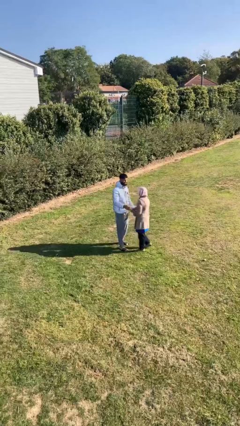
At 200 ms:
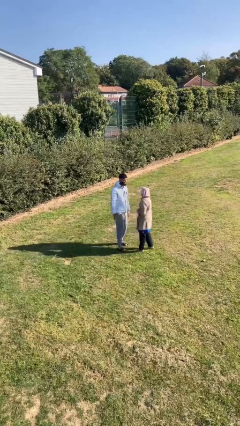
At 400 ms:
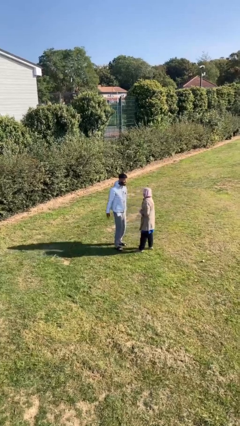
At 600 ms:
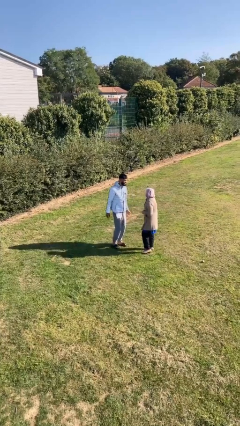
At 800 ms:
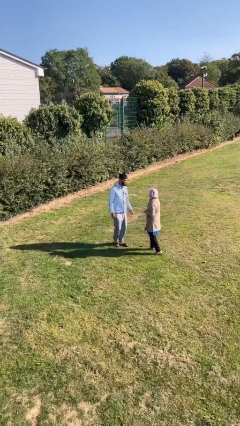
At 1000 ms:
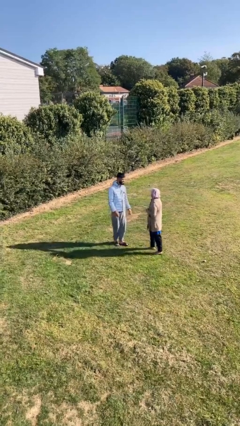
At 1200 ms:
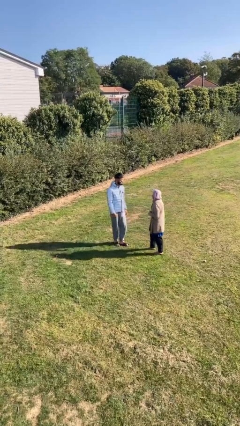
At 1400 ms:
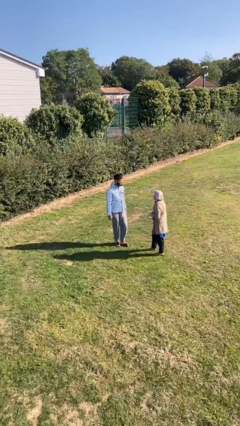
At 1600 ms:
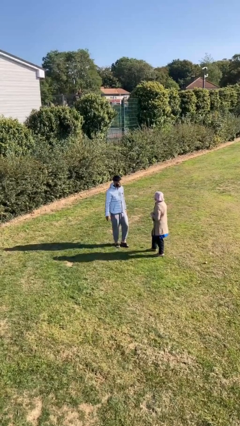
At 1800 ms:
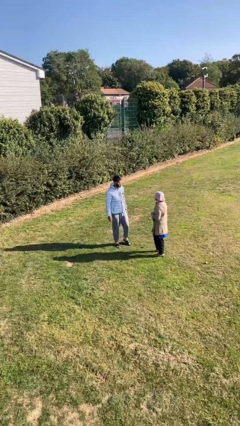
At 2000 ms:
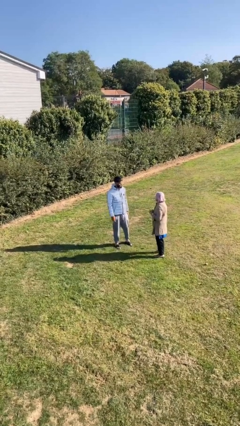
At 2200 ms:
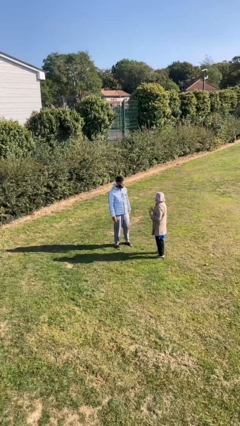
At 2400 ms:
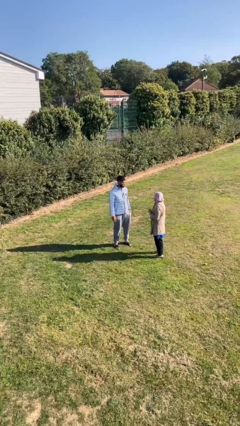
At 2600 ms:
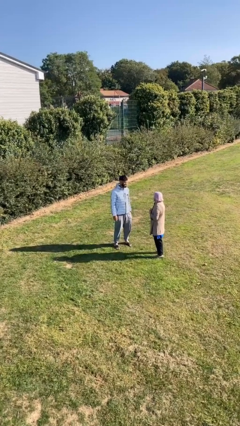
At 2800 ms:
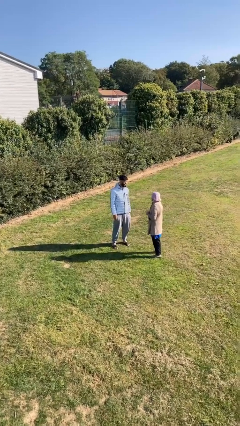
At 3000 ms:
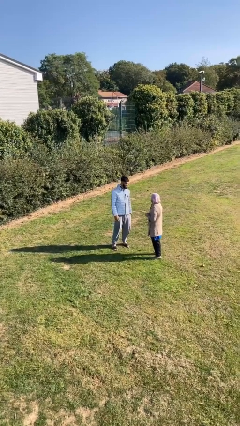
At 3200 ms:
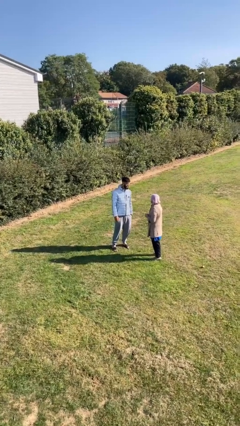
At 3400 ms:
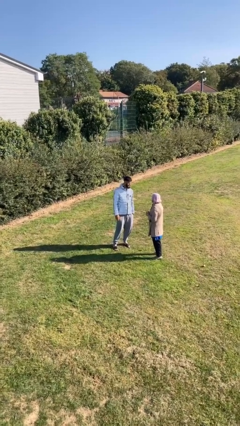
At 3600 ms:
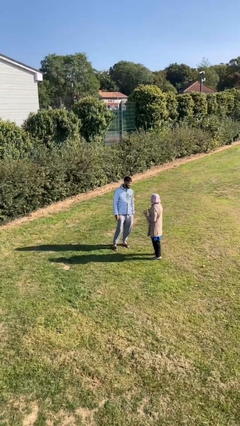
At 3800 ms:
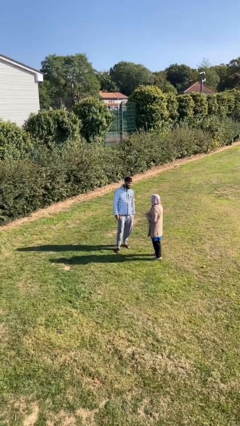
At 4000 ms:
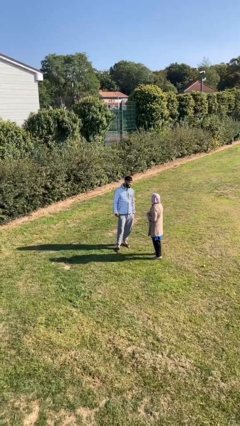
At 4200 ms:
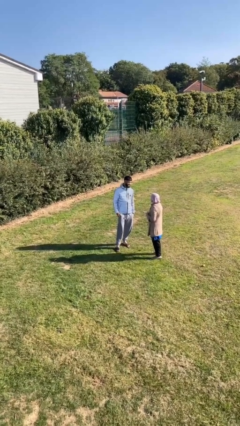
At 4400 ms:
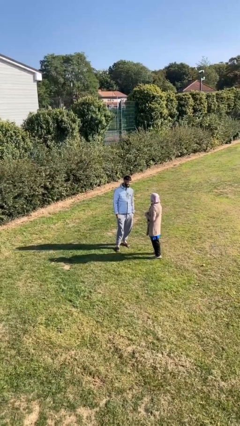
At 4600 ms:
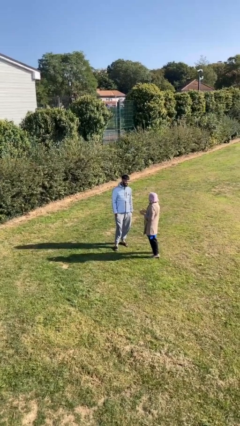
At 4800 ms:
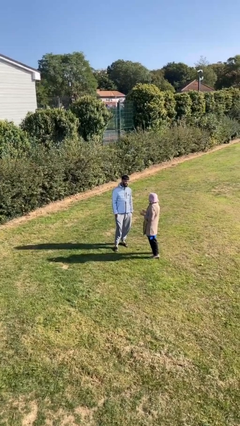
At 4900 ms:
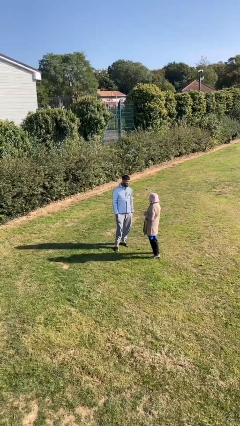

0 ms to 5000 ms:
person talks to person

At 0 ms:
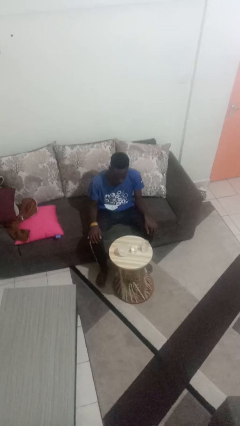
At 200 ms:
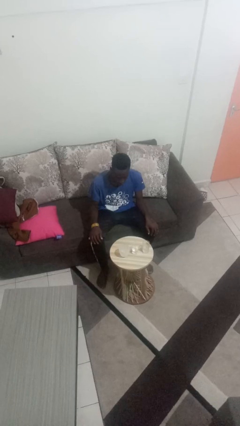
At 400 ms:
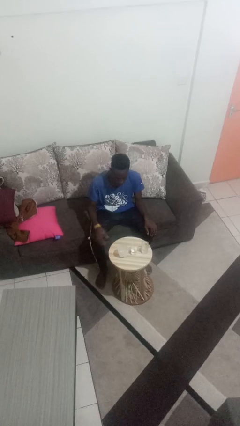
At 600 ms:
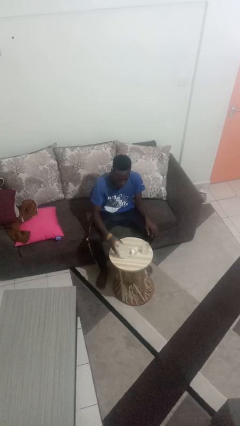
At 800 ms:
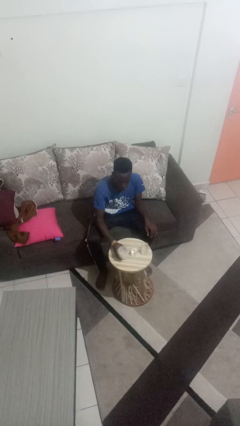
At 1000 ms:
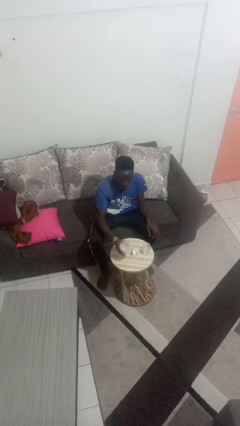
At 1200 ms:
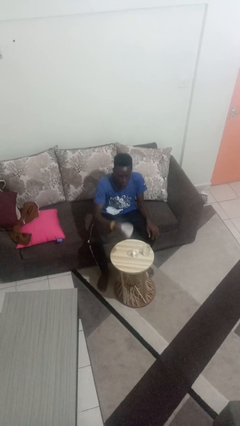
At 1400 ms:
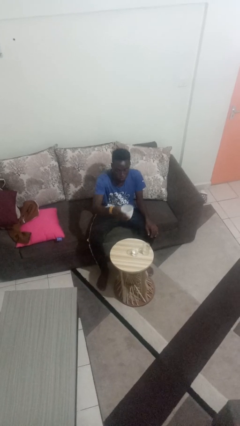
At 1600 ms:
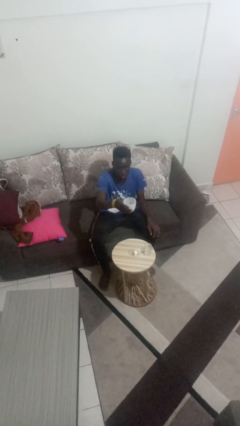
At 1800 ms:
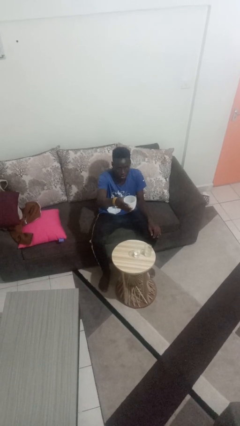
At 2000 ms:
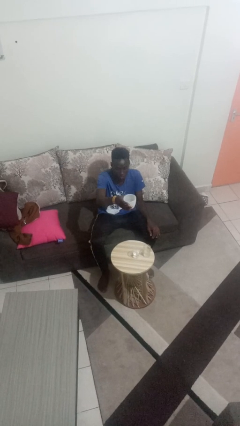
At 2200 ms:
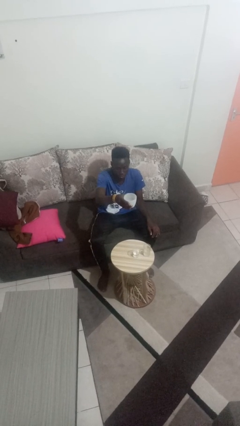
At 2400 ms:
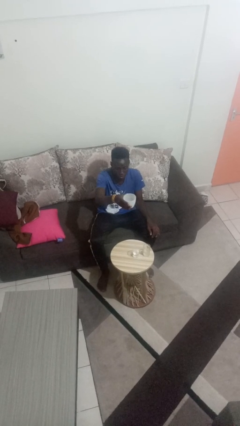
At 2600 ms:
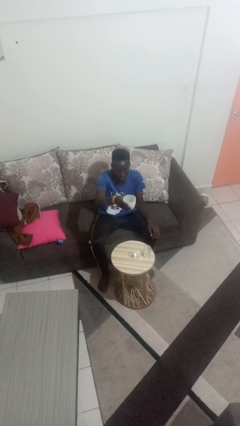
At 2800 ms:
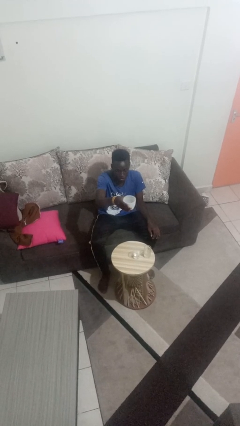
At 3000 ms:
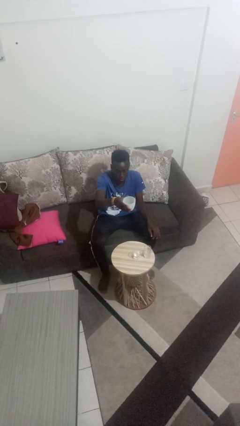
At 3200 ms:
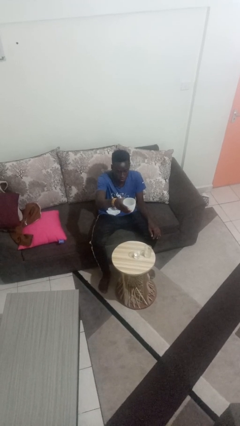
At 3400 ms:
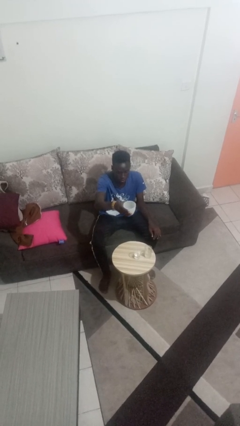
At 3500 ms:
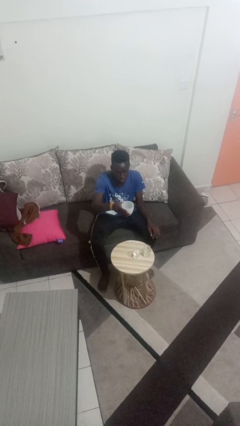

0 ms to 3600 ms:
person picks up object from table

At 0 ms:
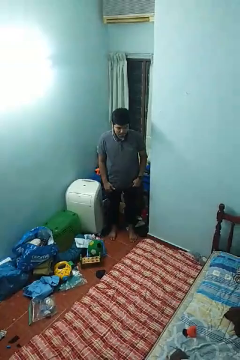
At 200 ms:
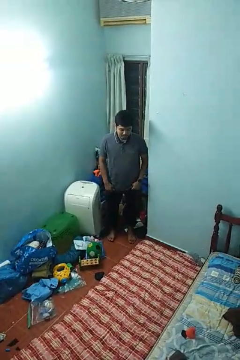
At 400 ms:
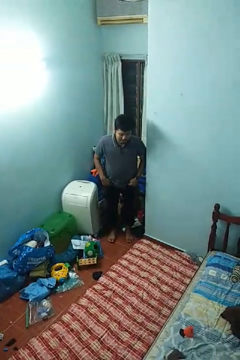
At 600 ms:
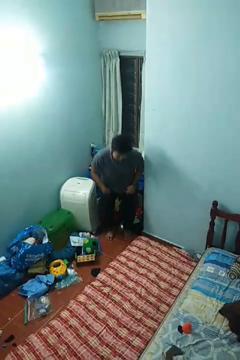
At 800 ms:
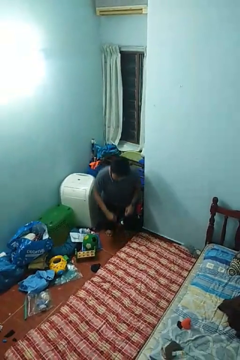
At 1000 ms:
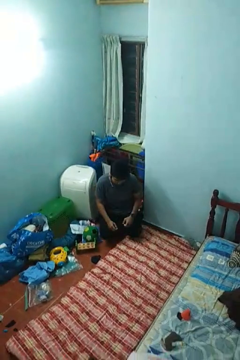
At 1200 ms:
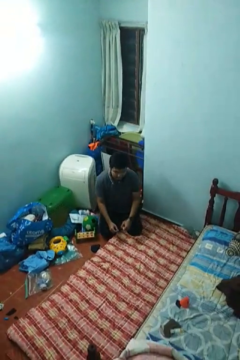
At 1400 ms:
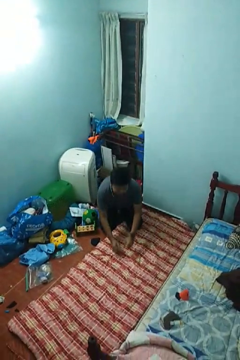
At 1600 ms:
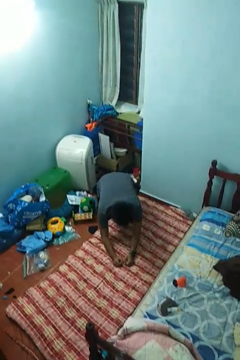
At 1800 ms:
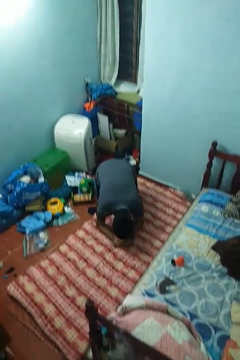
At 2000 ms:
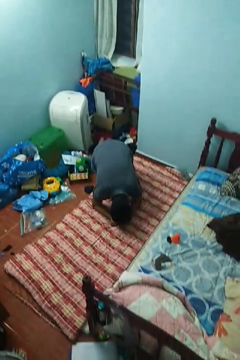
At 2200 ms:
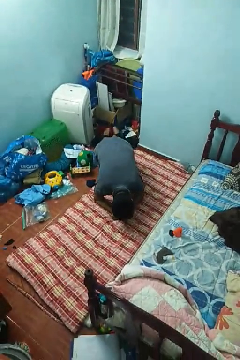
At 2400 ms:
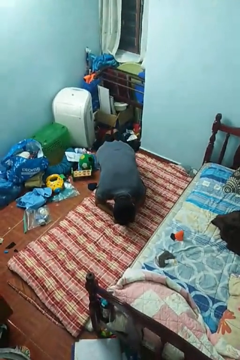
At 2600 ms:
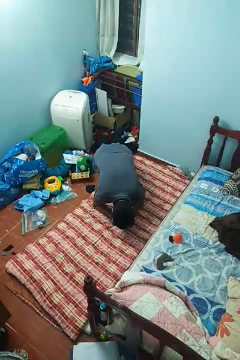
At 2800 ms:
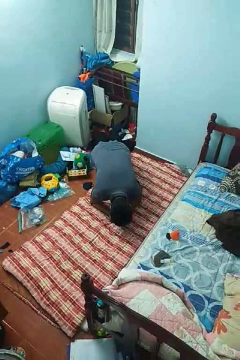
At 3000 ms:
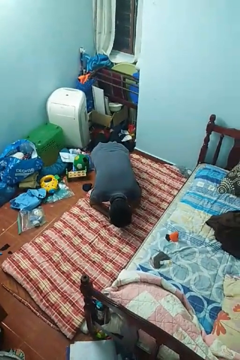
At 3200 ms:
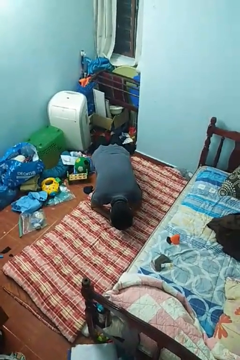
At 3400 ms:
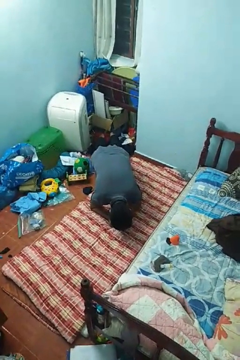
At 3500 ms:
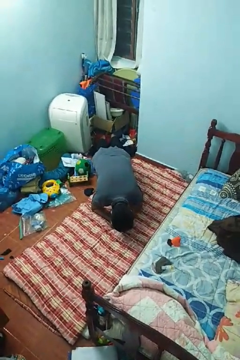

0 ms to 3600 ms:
person exercises with plank

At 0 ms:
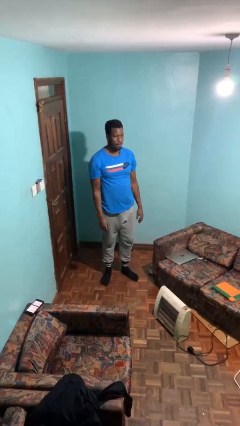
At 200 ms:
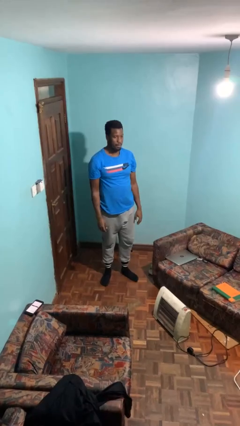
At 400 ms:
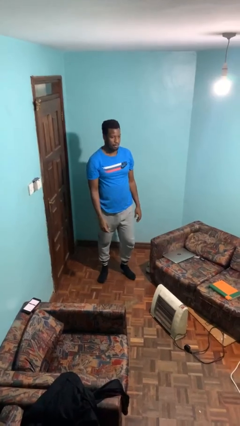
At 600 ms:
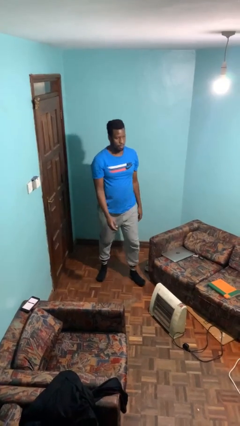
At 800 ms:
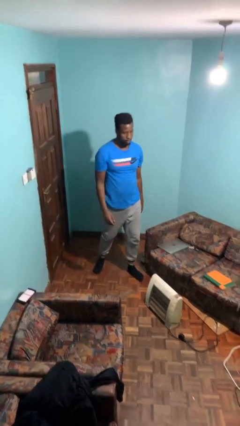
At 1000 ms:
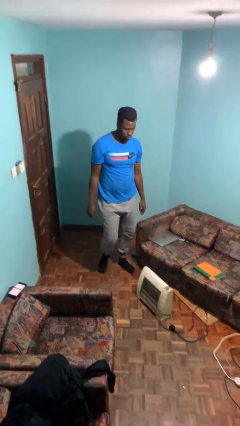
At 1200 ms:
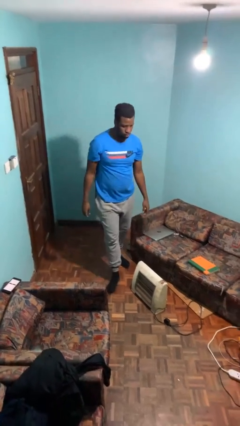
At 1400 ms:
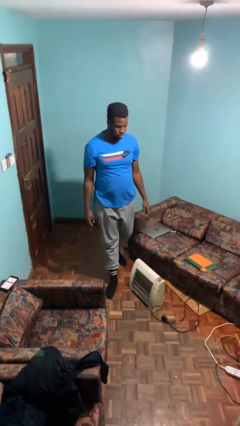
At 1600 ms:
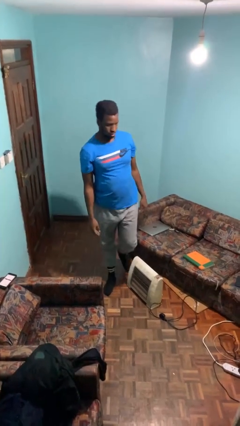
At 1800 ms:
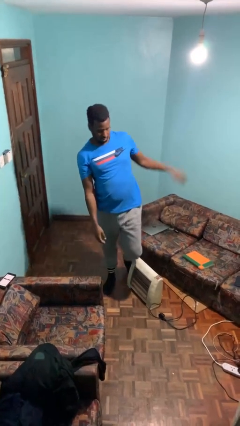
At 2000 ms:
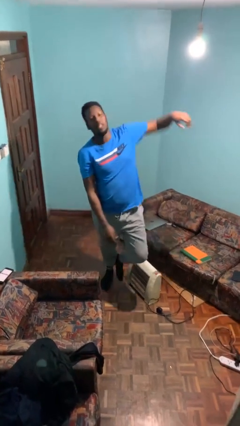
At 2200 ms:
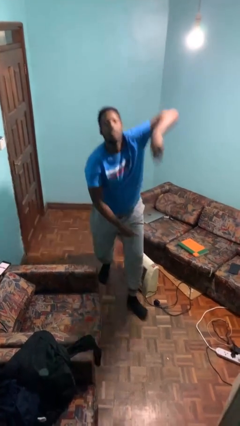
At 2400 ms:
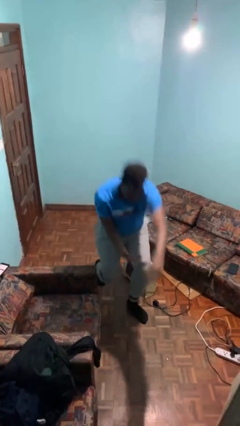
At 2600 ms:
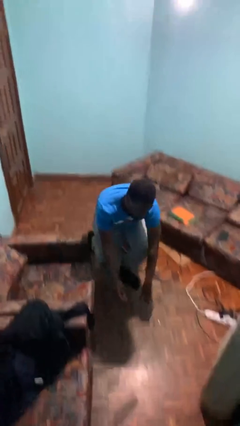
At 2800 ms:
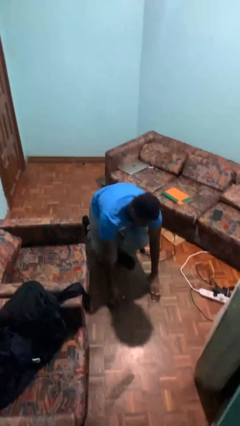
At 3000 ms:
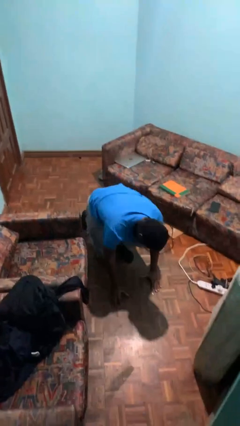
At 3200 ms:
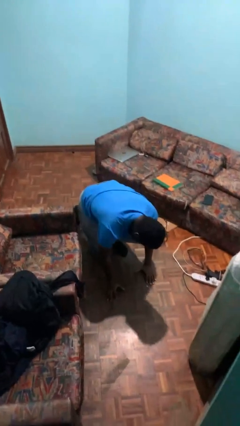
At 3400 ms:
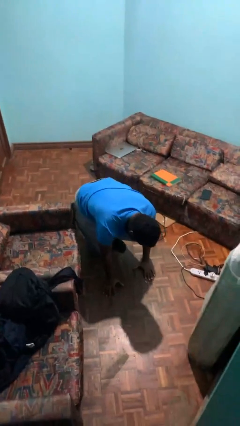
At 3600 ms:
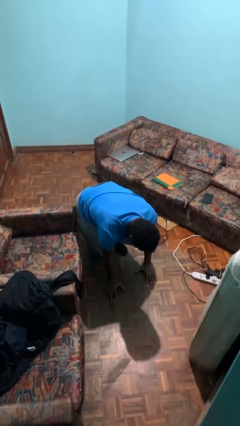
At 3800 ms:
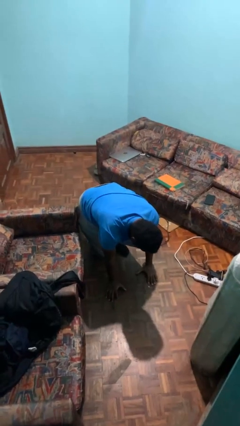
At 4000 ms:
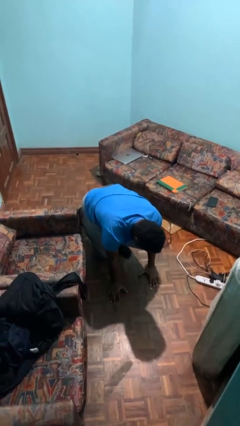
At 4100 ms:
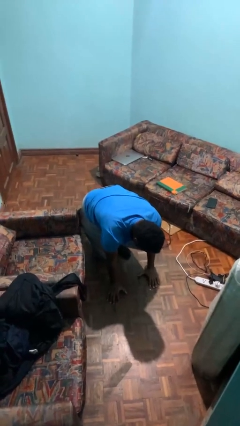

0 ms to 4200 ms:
person trips on object on floor

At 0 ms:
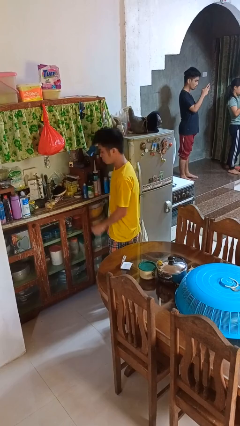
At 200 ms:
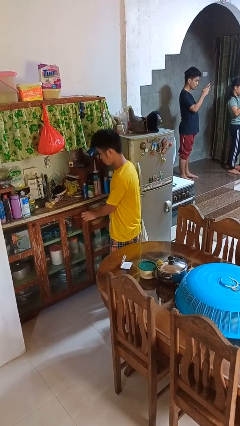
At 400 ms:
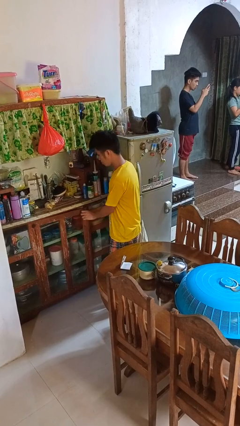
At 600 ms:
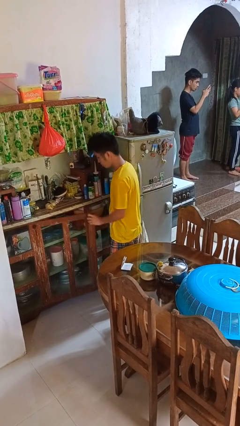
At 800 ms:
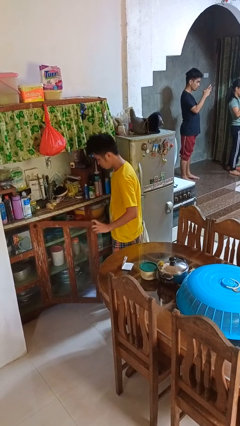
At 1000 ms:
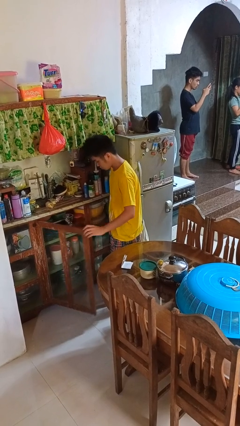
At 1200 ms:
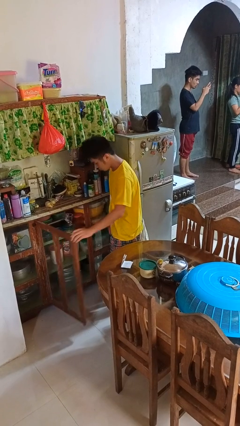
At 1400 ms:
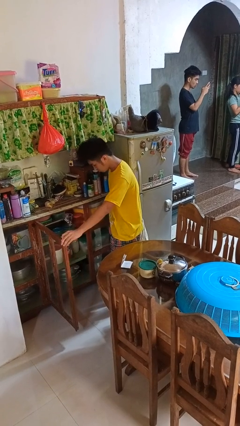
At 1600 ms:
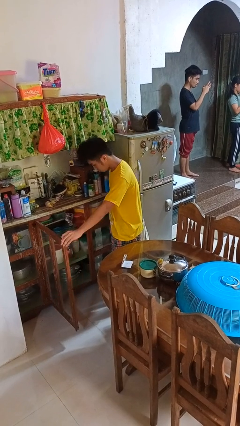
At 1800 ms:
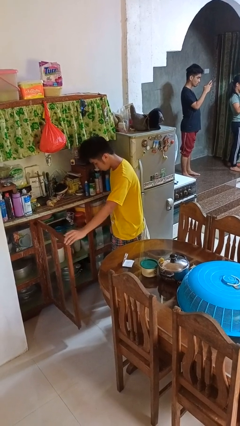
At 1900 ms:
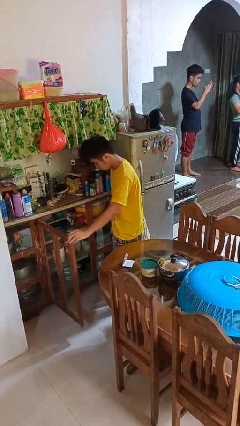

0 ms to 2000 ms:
person opens cabinet
